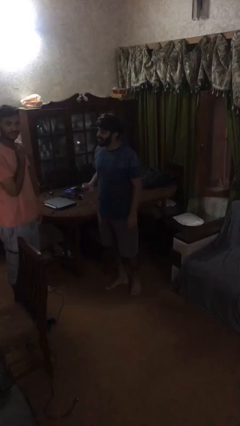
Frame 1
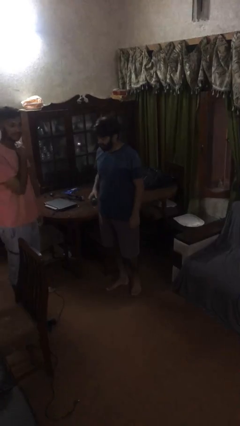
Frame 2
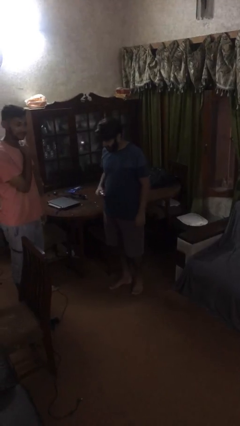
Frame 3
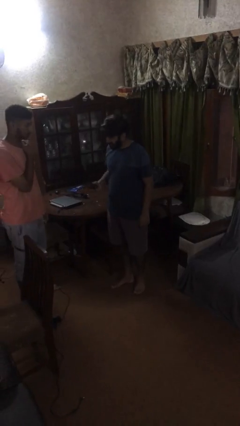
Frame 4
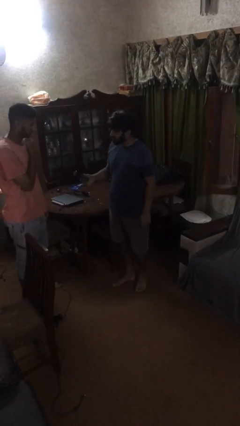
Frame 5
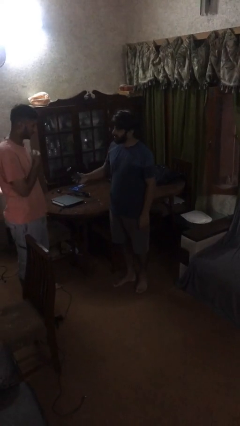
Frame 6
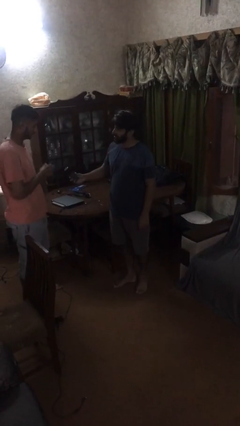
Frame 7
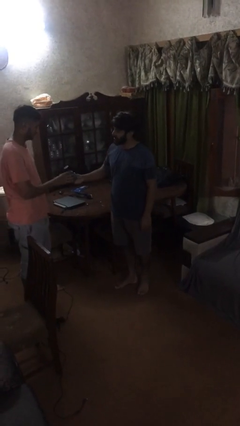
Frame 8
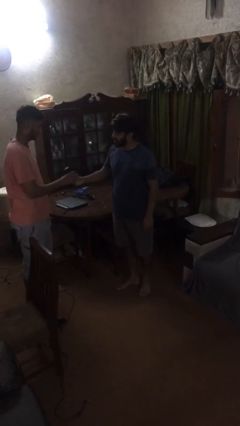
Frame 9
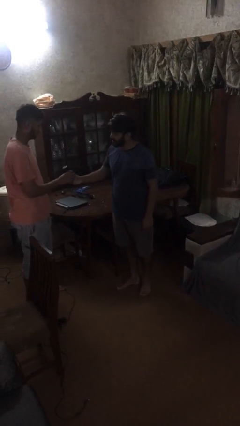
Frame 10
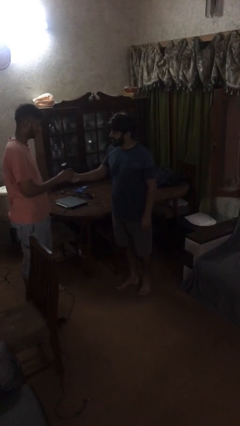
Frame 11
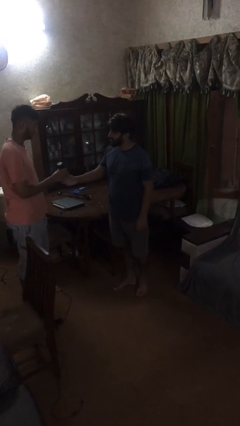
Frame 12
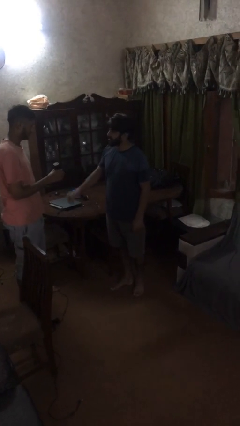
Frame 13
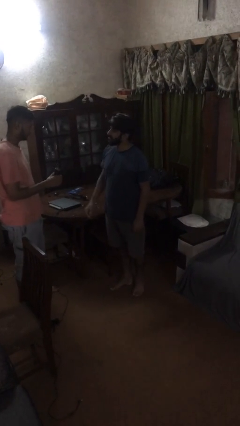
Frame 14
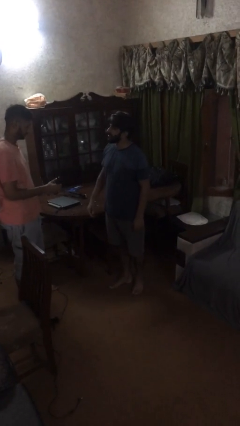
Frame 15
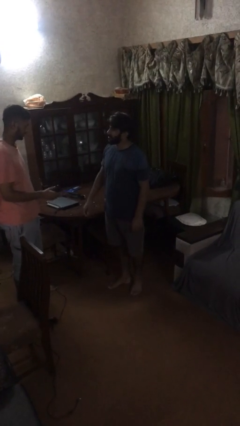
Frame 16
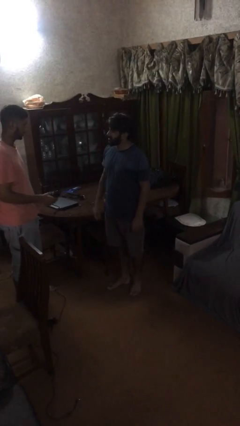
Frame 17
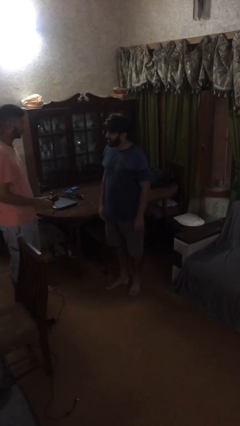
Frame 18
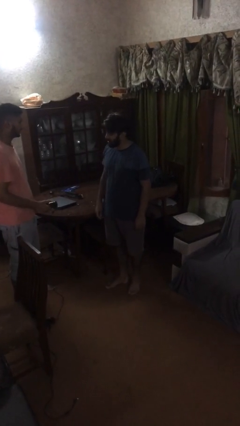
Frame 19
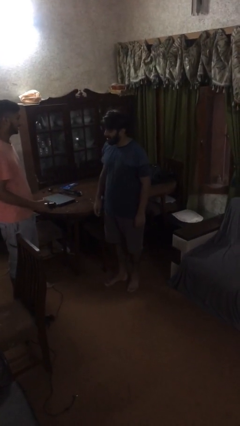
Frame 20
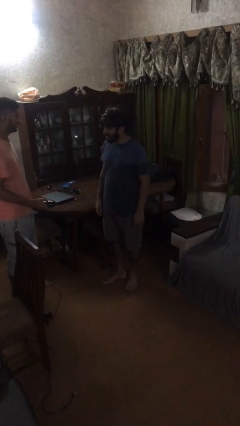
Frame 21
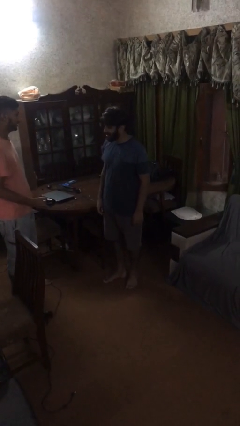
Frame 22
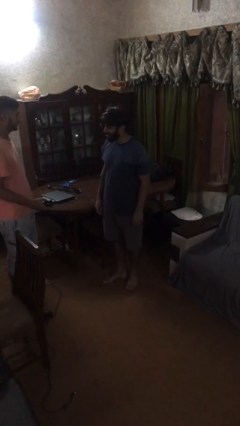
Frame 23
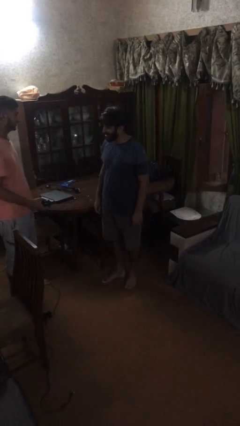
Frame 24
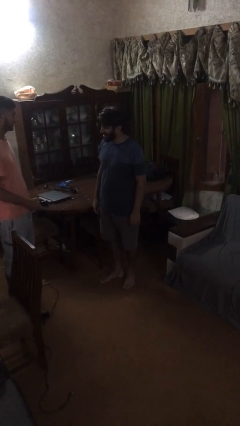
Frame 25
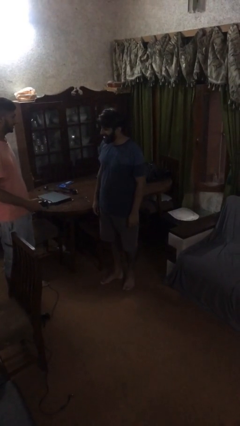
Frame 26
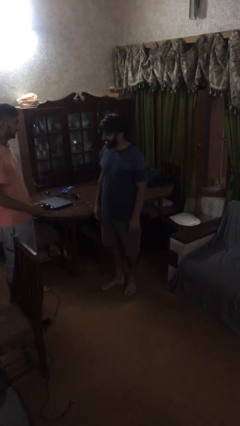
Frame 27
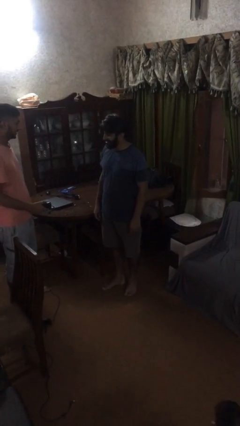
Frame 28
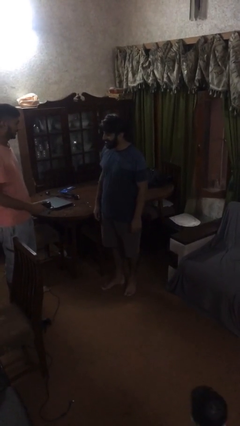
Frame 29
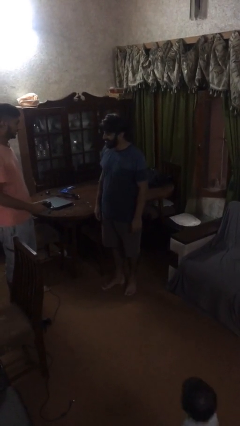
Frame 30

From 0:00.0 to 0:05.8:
person transfers object to person

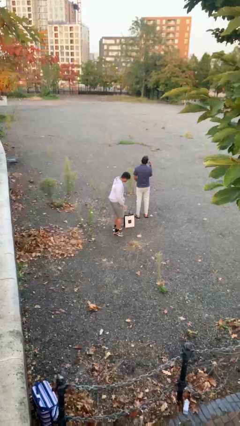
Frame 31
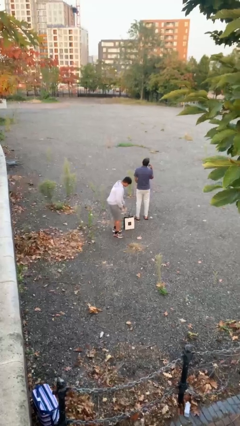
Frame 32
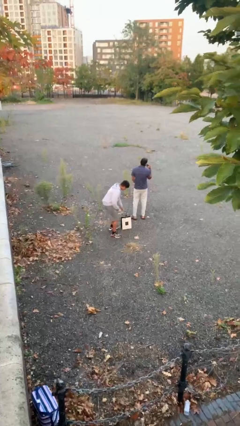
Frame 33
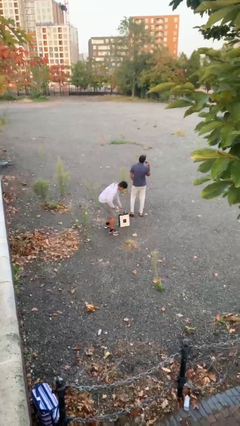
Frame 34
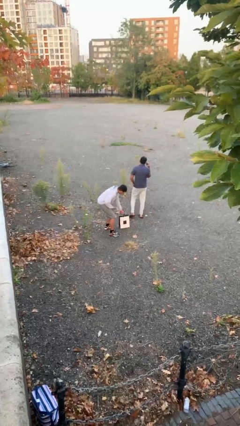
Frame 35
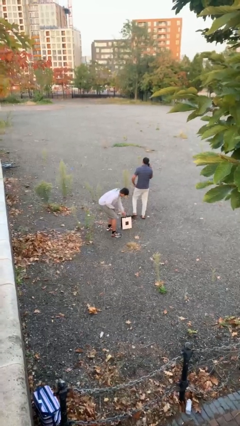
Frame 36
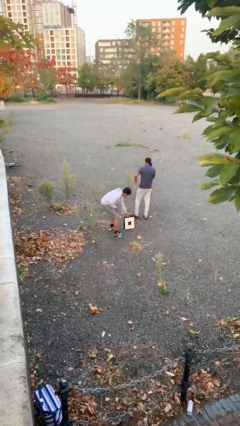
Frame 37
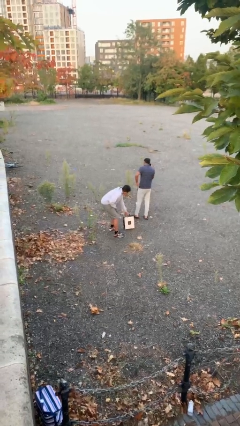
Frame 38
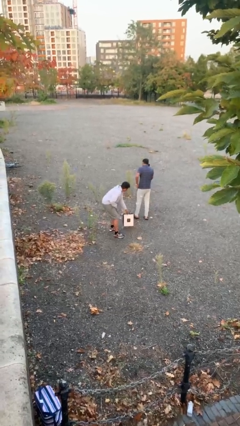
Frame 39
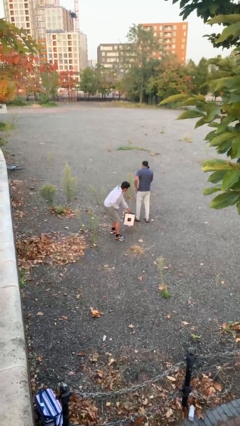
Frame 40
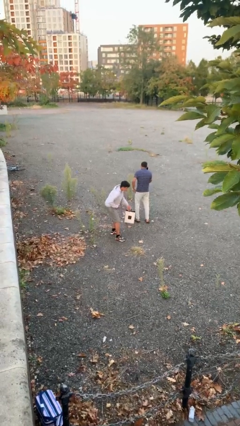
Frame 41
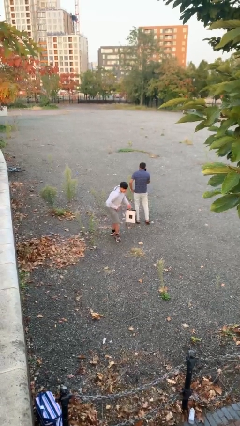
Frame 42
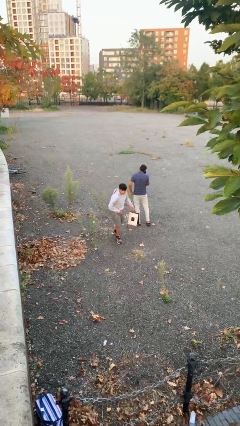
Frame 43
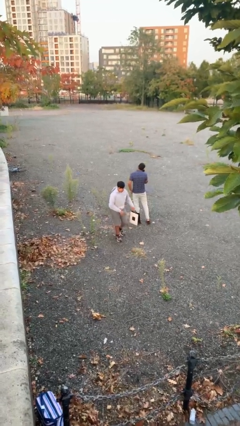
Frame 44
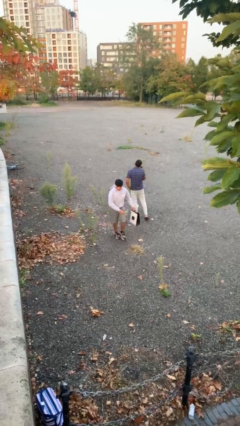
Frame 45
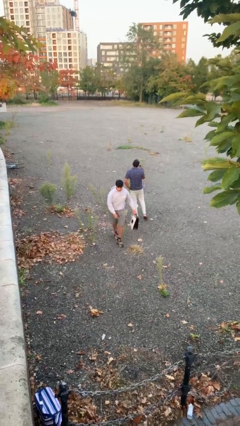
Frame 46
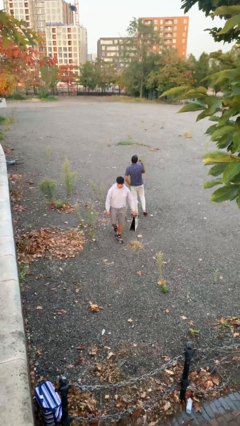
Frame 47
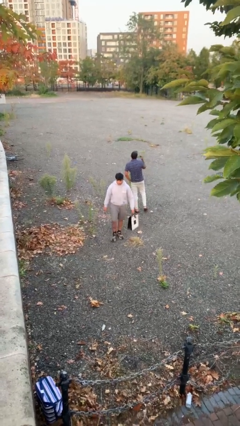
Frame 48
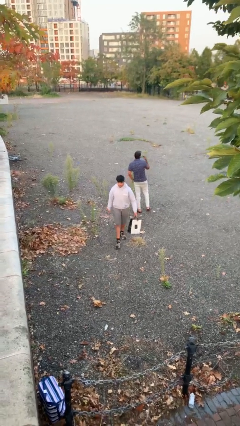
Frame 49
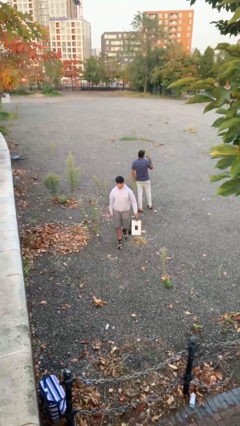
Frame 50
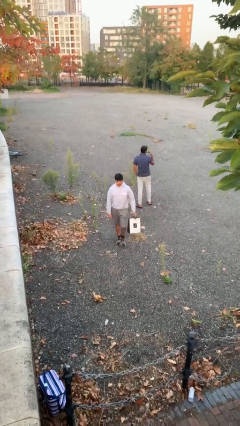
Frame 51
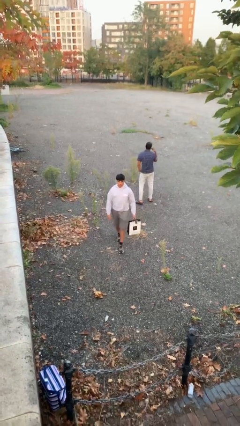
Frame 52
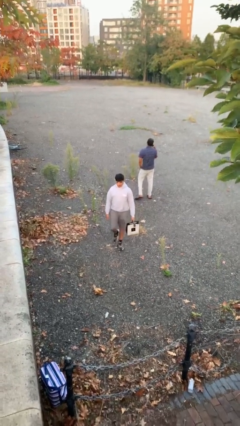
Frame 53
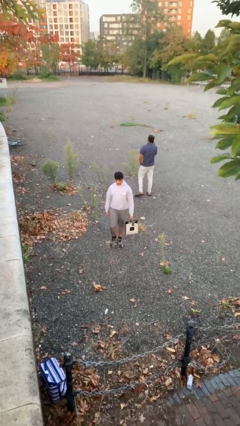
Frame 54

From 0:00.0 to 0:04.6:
person steals object from person

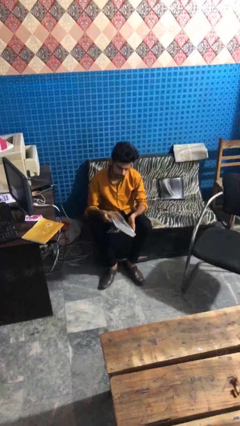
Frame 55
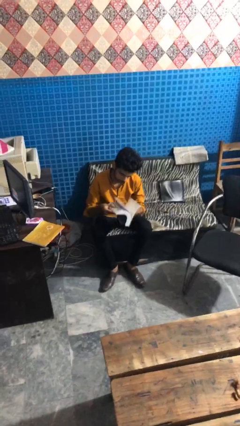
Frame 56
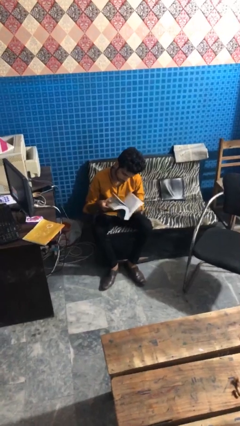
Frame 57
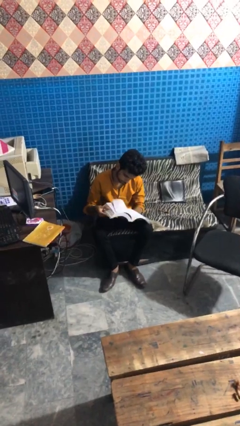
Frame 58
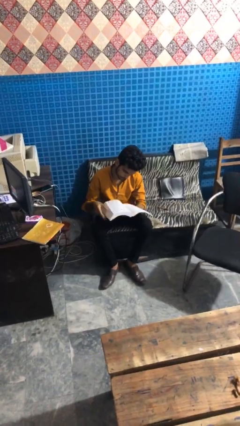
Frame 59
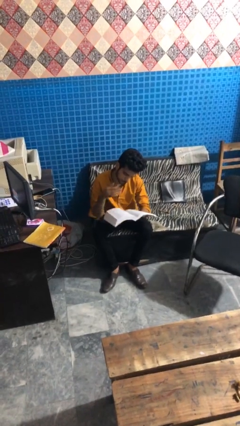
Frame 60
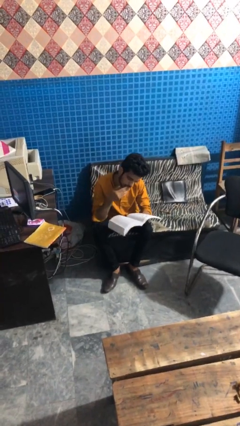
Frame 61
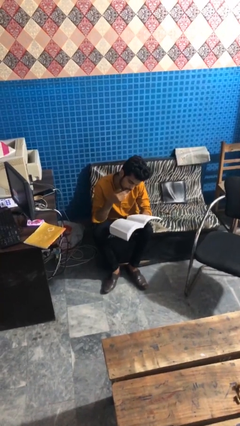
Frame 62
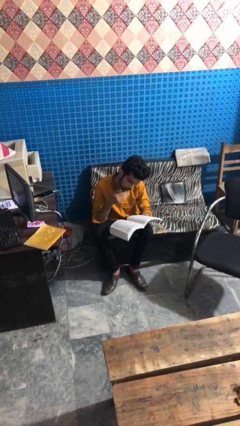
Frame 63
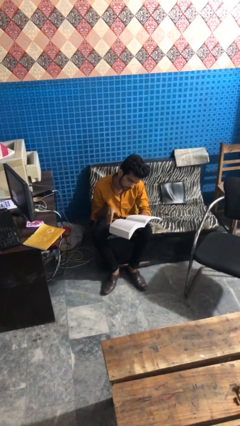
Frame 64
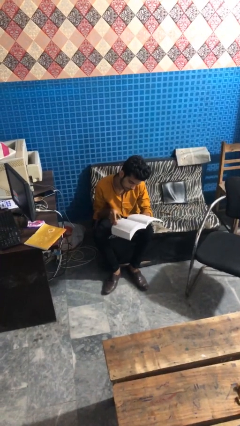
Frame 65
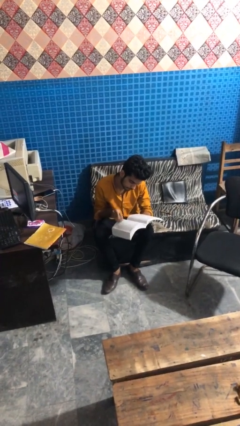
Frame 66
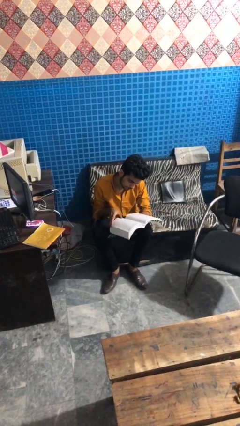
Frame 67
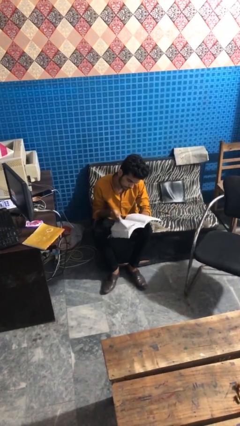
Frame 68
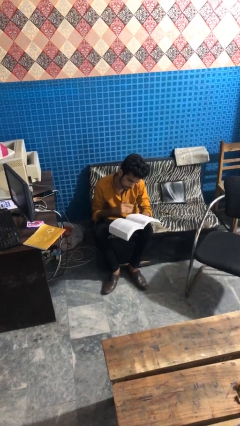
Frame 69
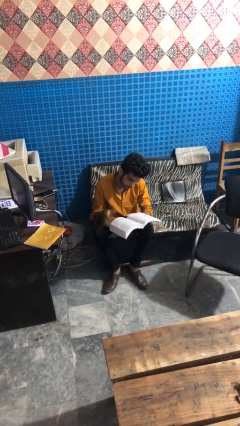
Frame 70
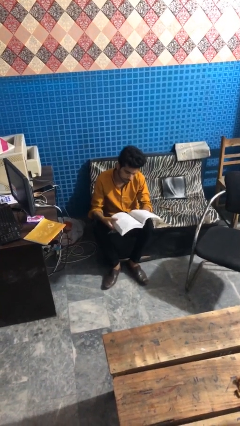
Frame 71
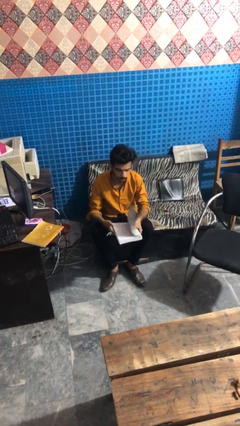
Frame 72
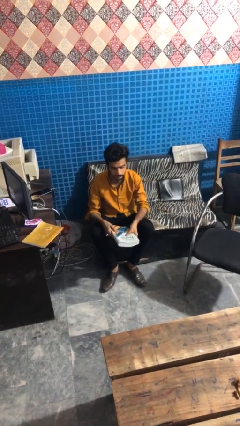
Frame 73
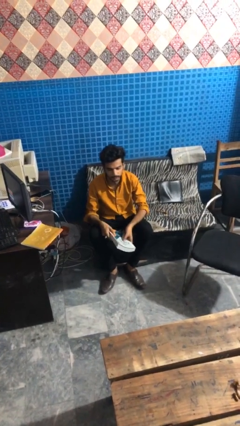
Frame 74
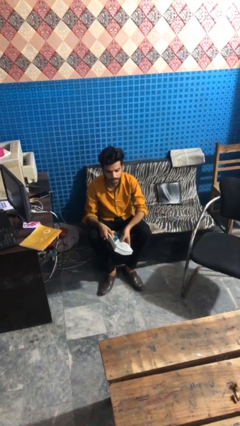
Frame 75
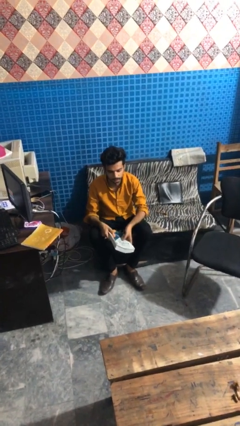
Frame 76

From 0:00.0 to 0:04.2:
person reads book

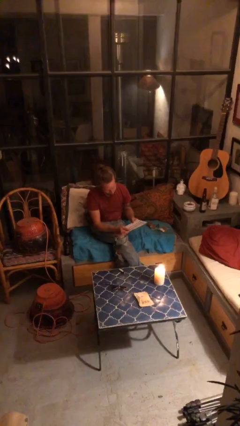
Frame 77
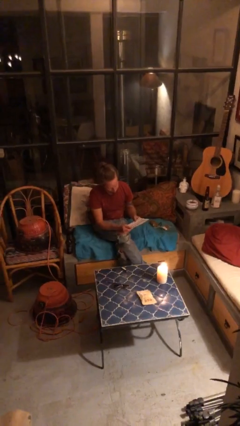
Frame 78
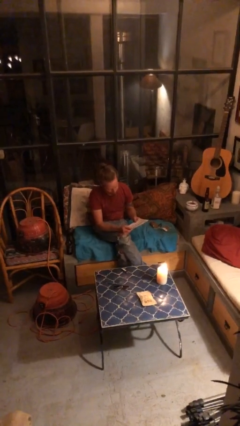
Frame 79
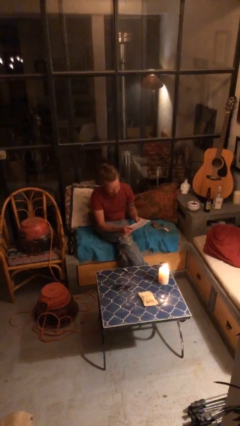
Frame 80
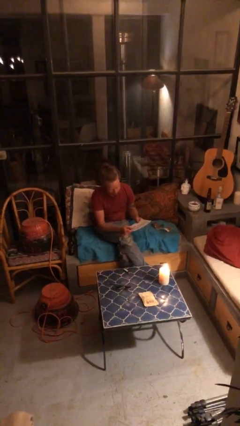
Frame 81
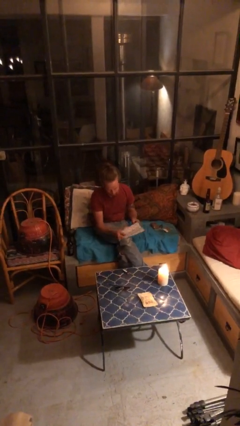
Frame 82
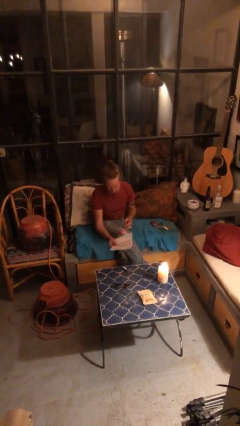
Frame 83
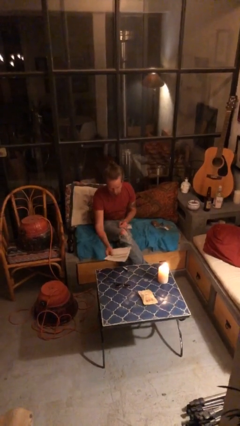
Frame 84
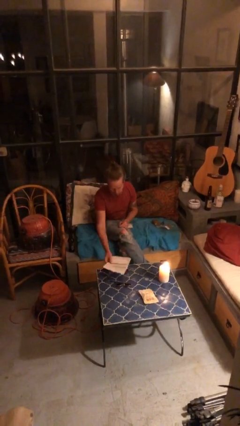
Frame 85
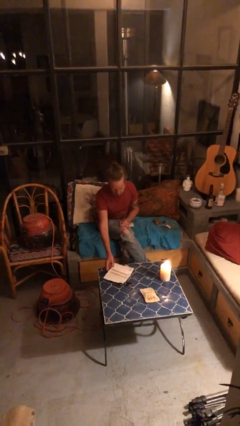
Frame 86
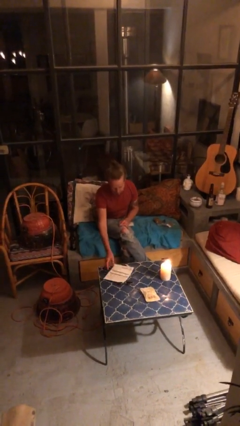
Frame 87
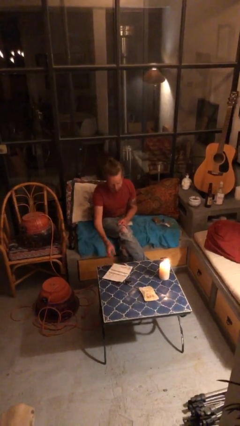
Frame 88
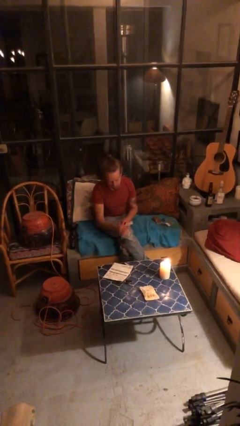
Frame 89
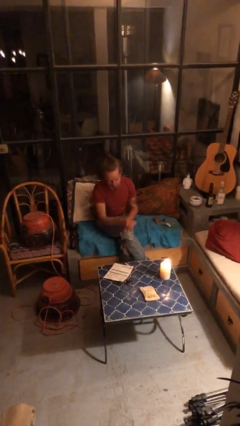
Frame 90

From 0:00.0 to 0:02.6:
person puts down object on table

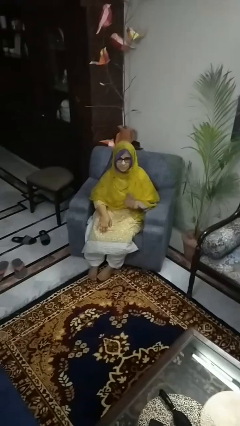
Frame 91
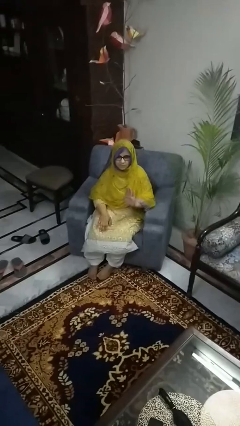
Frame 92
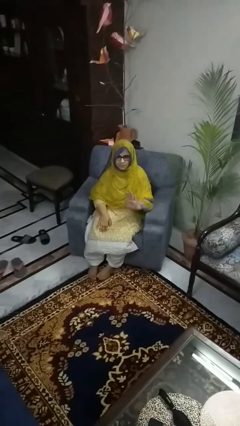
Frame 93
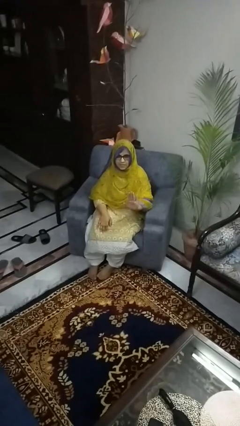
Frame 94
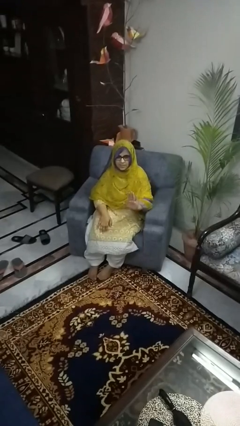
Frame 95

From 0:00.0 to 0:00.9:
person gestures stop
